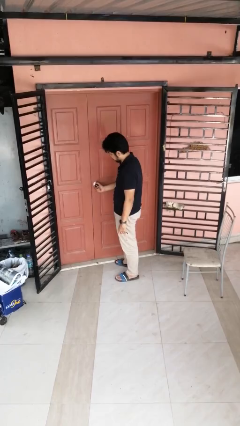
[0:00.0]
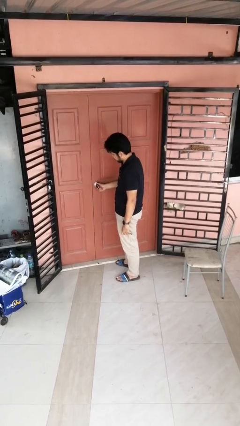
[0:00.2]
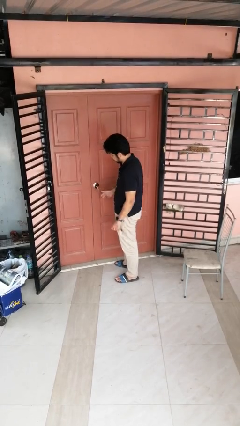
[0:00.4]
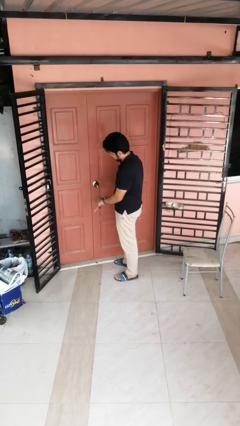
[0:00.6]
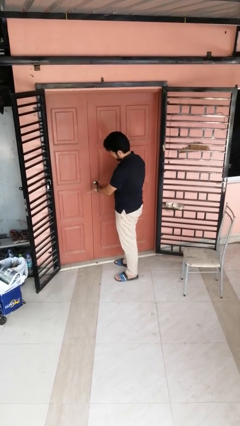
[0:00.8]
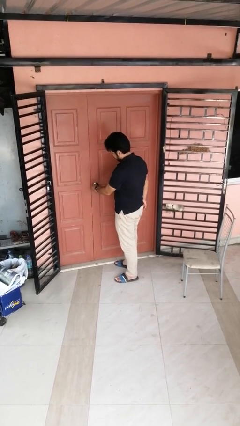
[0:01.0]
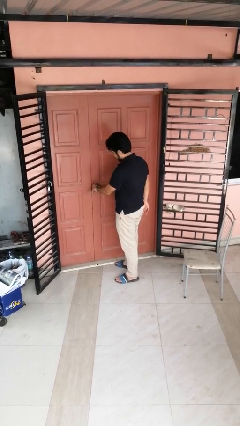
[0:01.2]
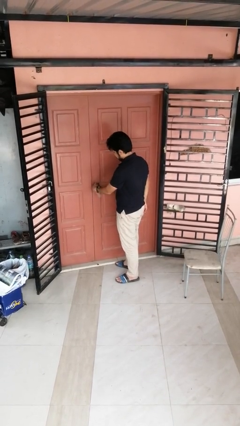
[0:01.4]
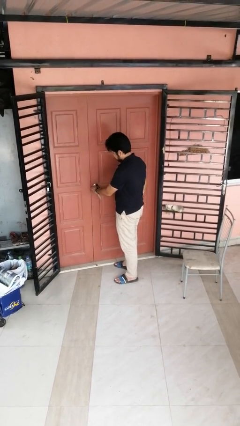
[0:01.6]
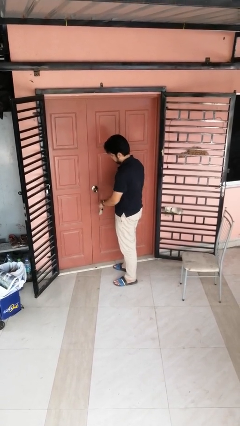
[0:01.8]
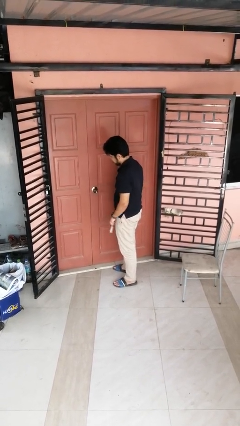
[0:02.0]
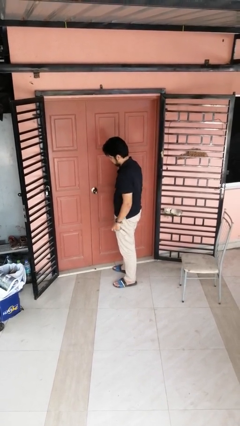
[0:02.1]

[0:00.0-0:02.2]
person locks door with keys

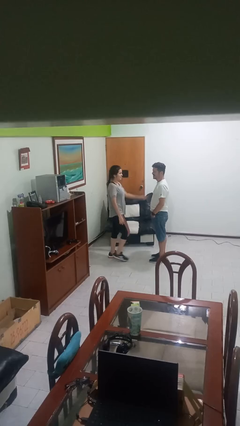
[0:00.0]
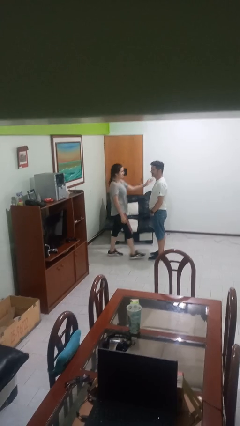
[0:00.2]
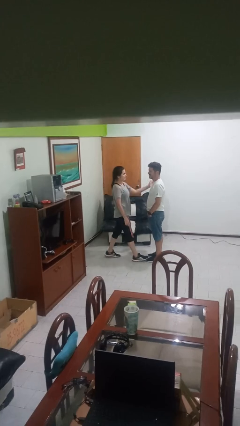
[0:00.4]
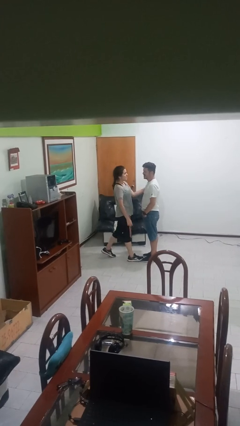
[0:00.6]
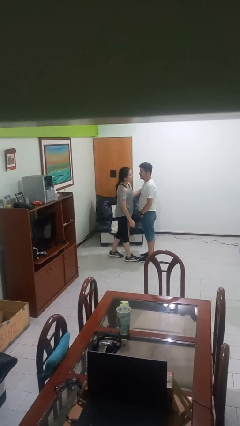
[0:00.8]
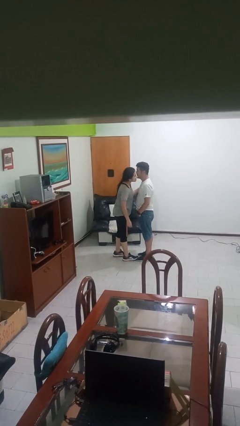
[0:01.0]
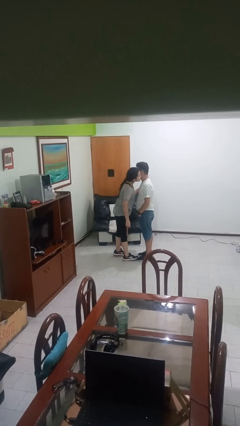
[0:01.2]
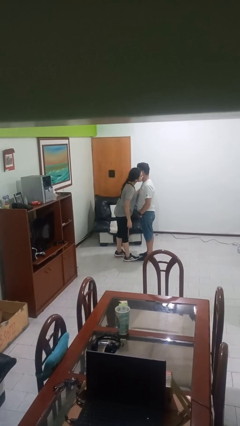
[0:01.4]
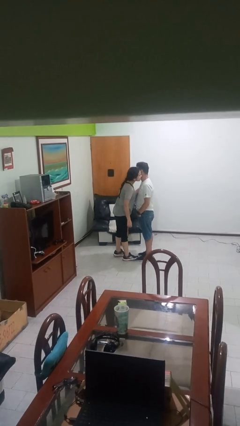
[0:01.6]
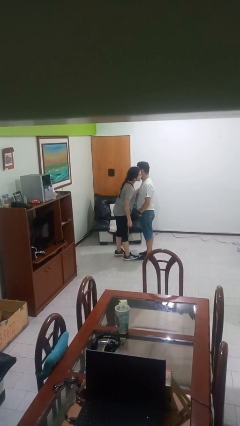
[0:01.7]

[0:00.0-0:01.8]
person kisses cheek of person

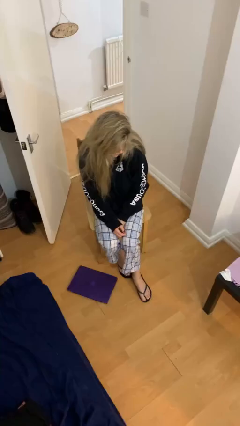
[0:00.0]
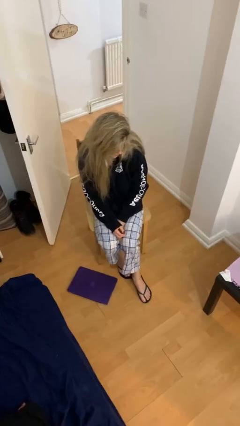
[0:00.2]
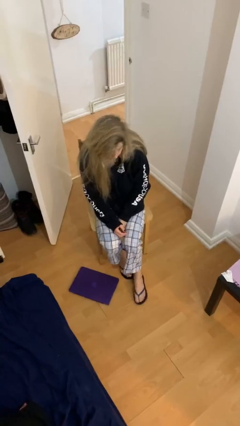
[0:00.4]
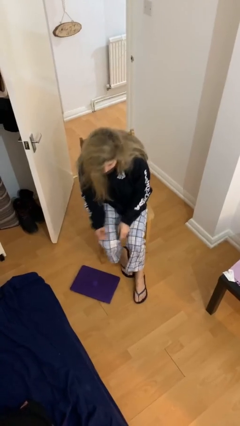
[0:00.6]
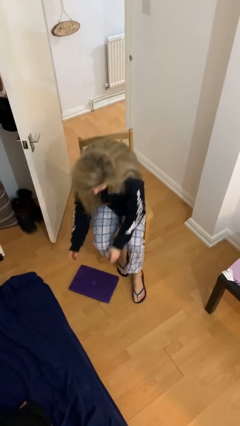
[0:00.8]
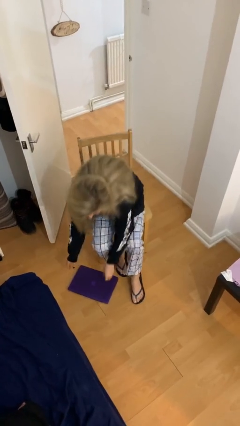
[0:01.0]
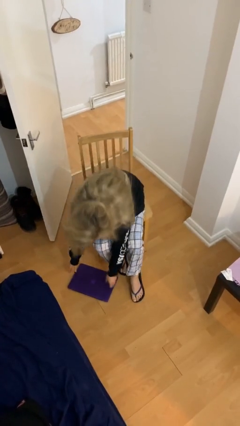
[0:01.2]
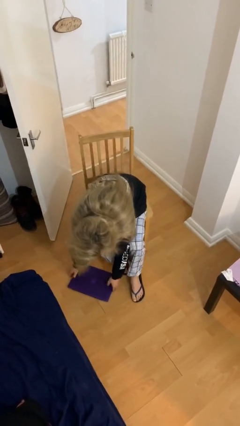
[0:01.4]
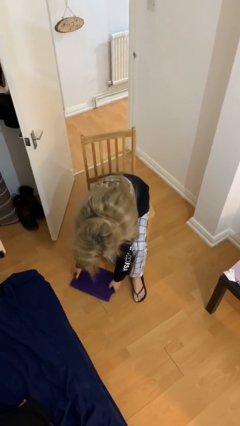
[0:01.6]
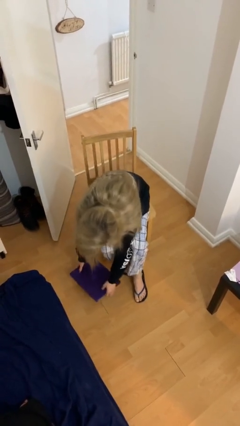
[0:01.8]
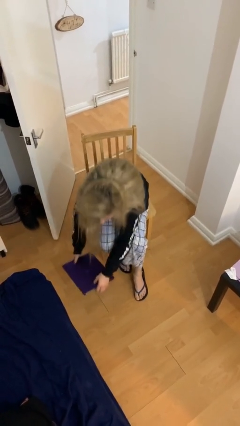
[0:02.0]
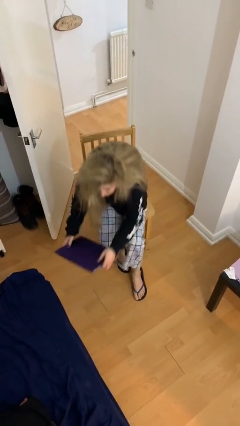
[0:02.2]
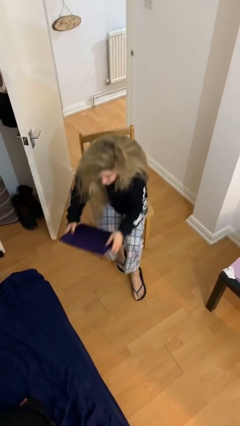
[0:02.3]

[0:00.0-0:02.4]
person picks up object from floor

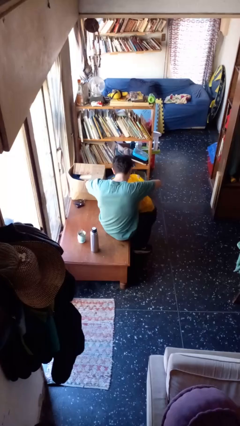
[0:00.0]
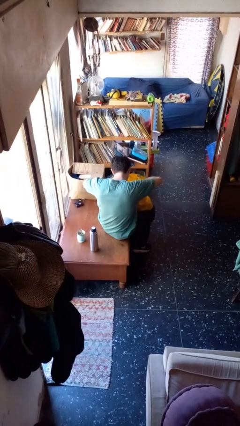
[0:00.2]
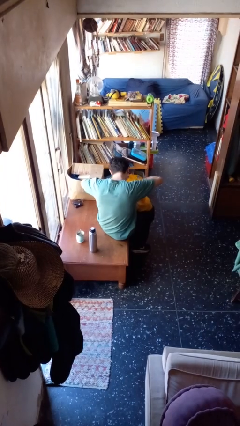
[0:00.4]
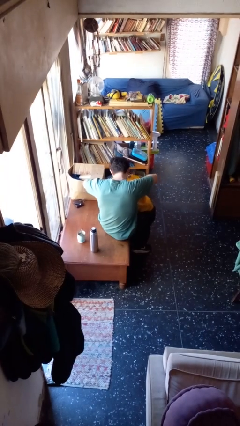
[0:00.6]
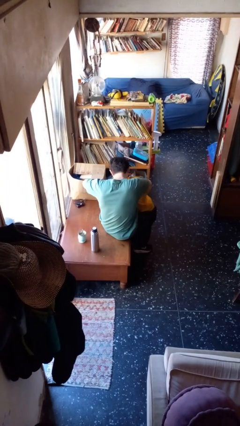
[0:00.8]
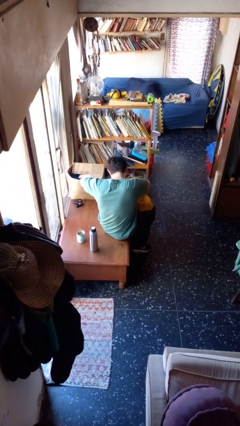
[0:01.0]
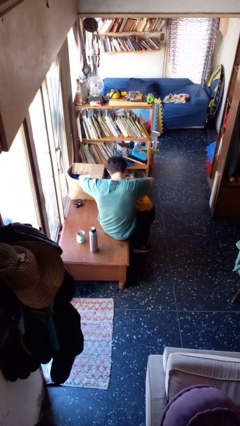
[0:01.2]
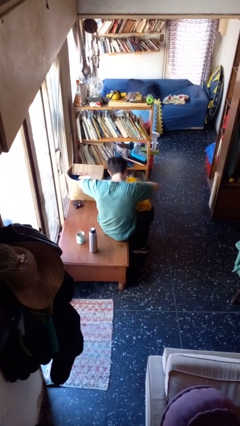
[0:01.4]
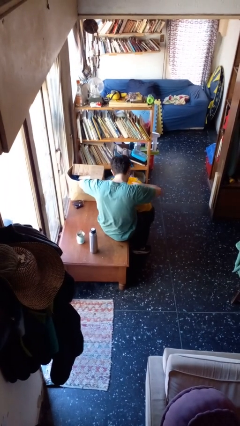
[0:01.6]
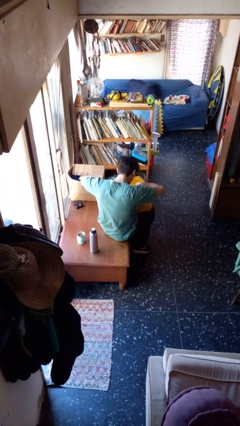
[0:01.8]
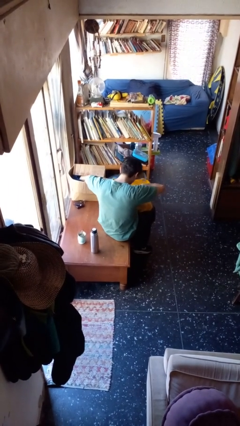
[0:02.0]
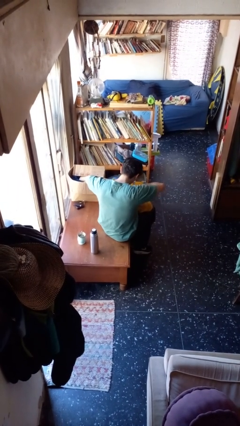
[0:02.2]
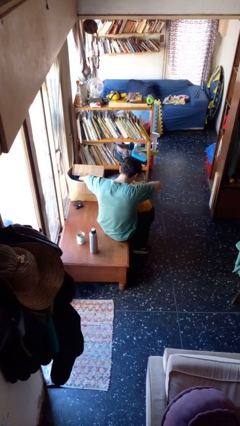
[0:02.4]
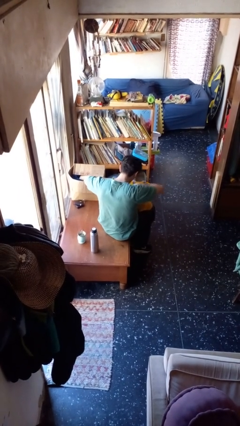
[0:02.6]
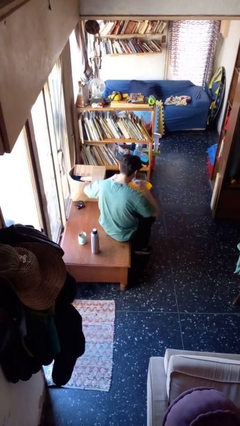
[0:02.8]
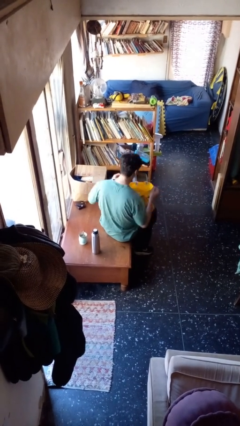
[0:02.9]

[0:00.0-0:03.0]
person searches in bag

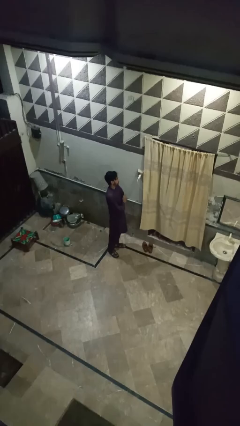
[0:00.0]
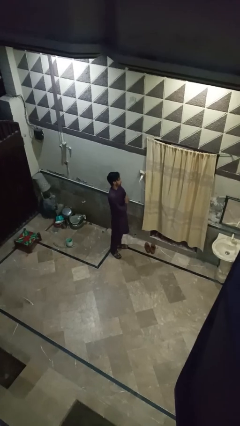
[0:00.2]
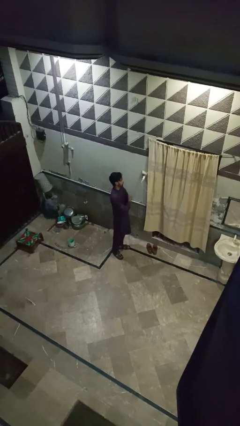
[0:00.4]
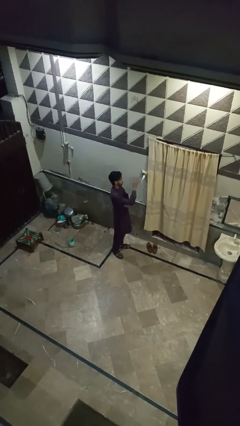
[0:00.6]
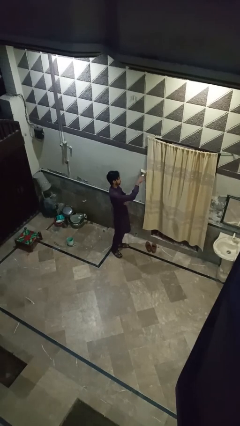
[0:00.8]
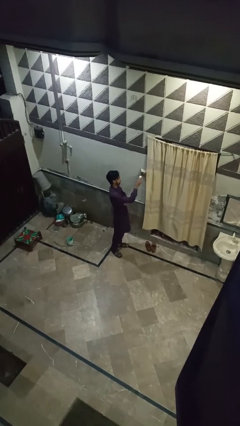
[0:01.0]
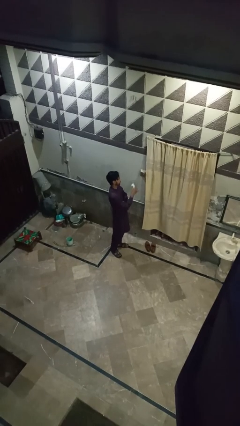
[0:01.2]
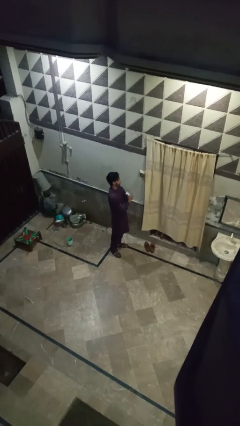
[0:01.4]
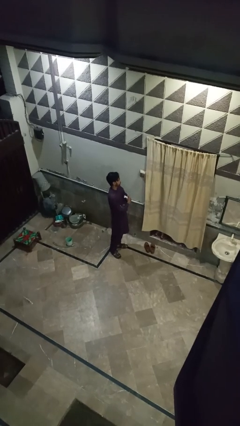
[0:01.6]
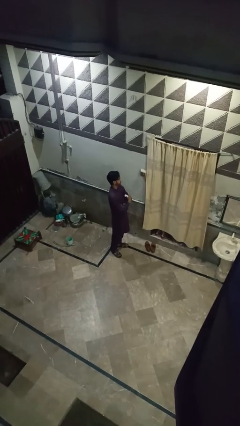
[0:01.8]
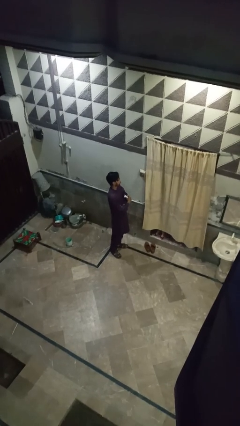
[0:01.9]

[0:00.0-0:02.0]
person unplugs from electrical socket

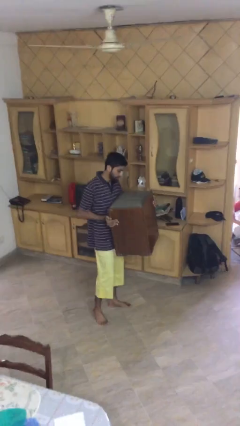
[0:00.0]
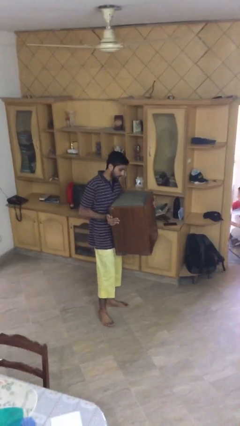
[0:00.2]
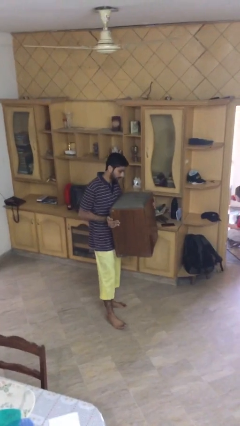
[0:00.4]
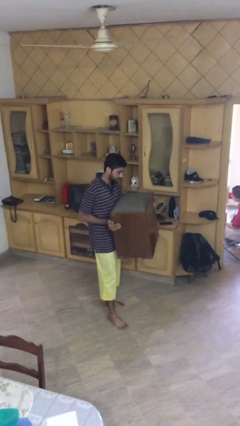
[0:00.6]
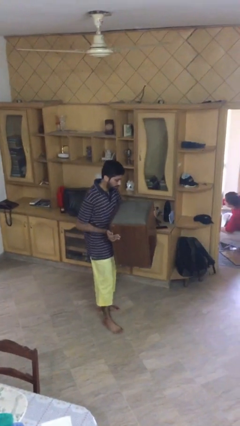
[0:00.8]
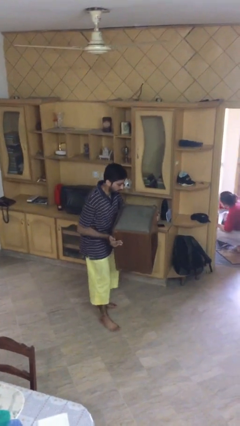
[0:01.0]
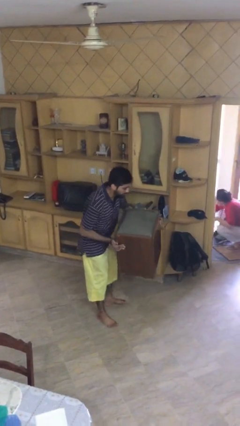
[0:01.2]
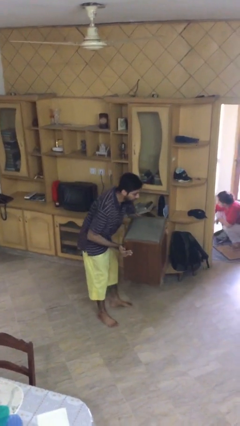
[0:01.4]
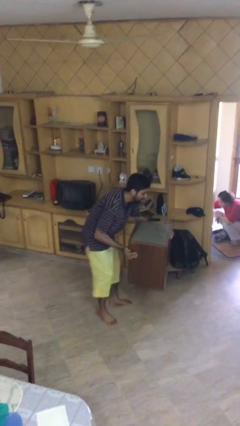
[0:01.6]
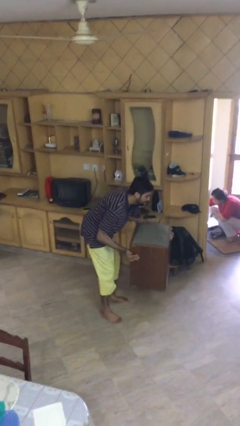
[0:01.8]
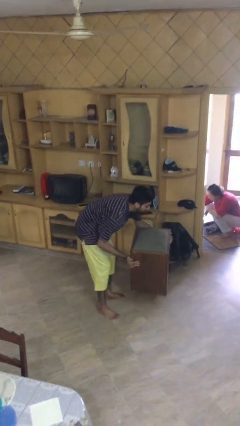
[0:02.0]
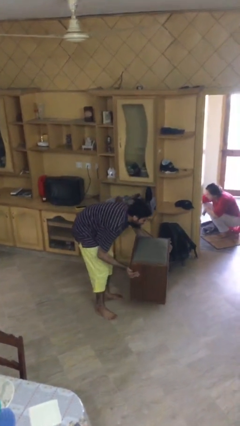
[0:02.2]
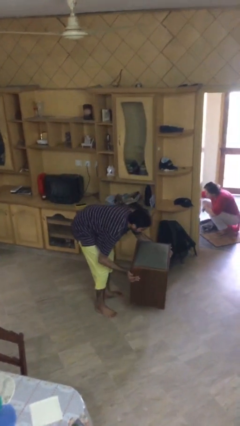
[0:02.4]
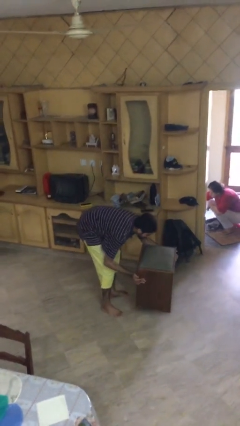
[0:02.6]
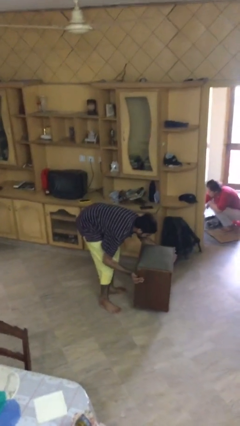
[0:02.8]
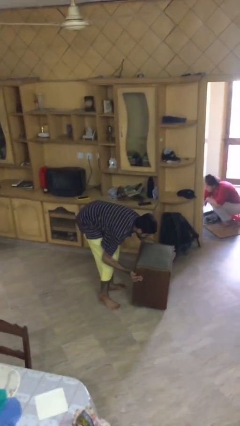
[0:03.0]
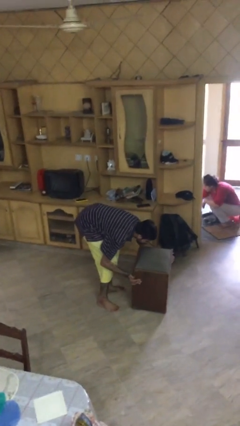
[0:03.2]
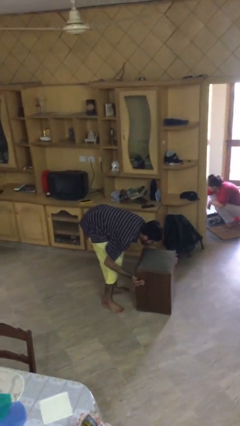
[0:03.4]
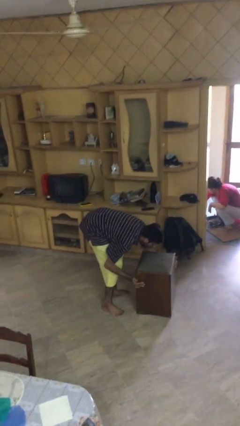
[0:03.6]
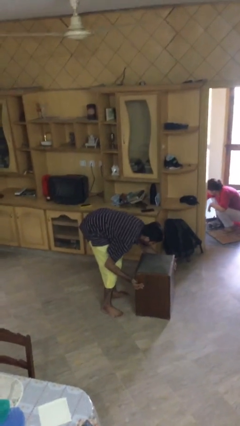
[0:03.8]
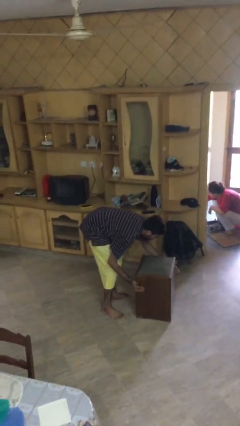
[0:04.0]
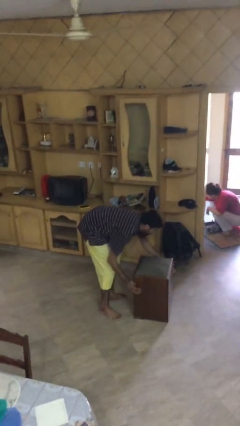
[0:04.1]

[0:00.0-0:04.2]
person puts down object on floor

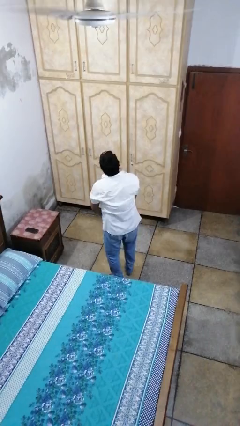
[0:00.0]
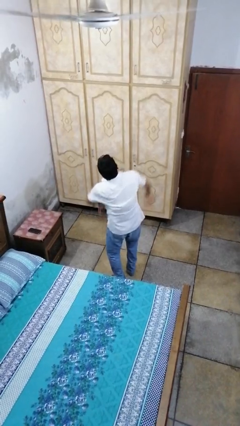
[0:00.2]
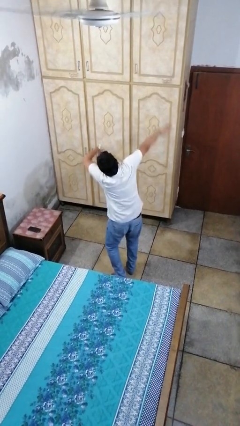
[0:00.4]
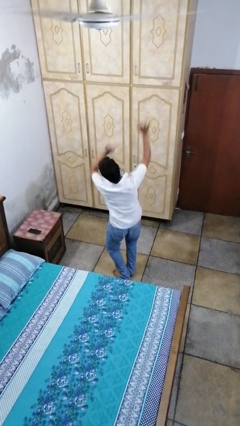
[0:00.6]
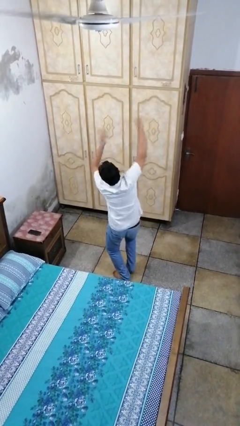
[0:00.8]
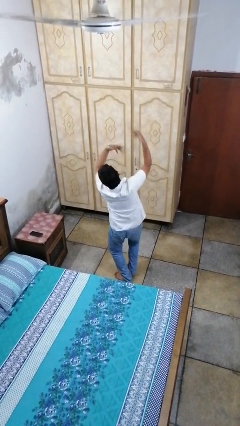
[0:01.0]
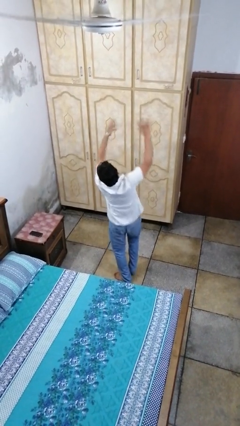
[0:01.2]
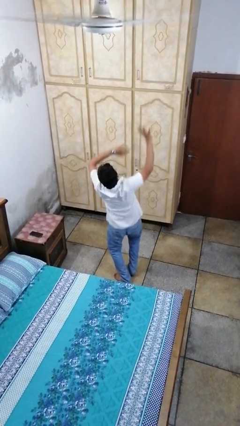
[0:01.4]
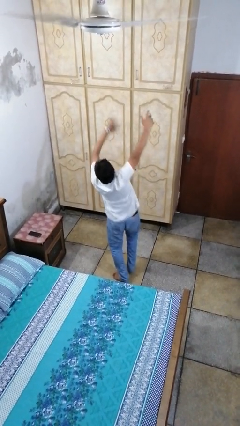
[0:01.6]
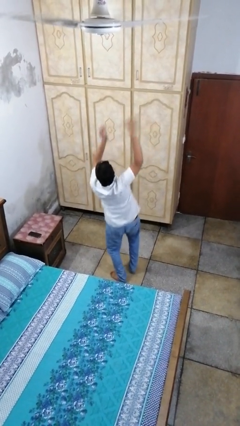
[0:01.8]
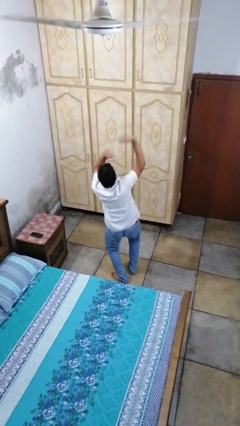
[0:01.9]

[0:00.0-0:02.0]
person dances in place
